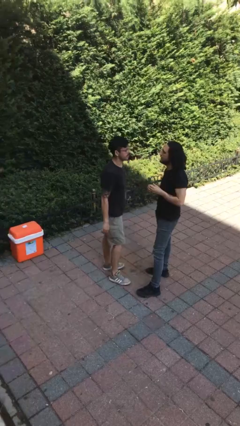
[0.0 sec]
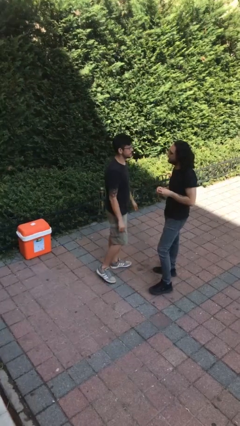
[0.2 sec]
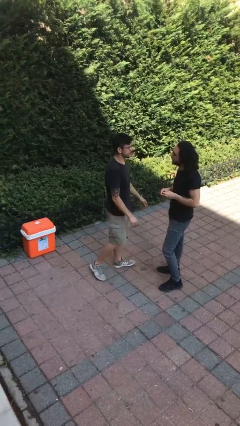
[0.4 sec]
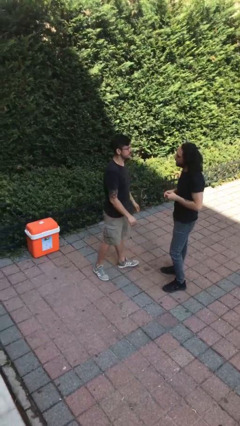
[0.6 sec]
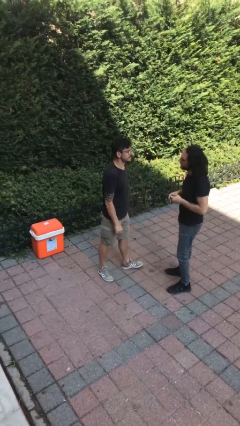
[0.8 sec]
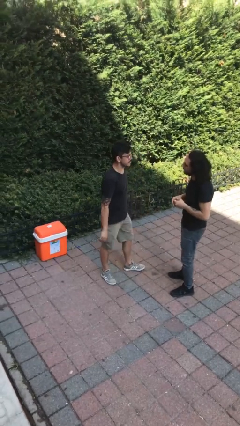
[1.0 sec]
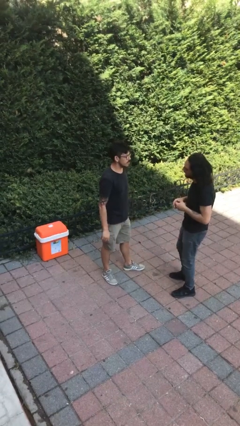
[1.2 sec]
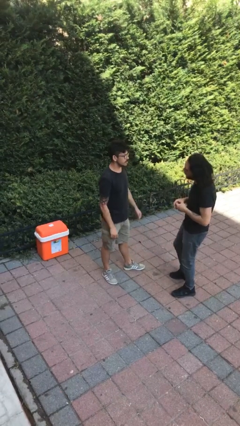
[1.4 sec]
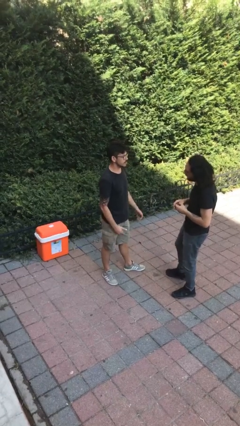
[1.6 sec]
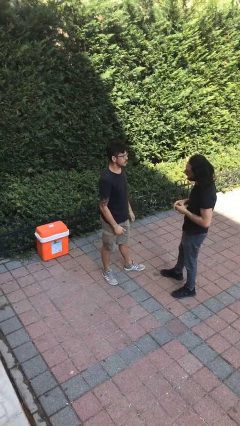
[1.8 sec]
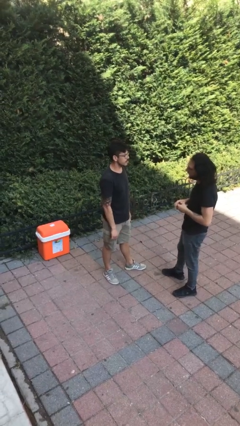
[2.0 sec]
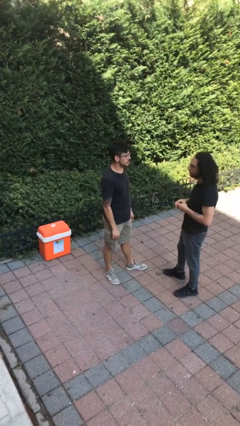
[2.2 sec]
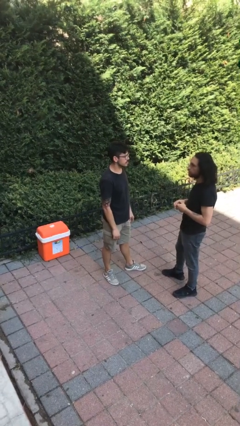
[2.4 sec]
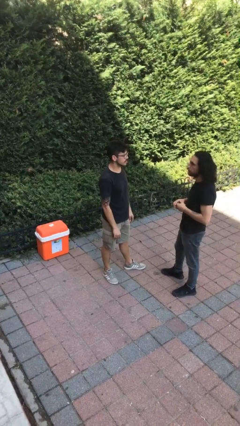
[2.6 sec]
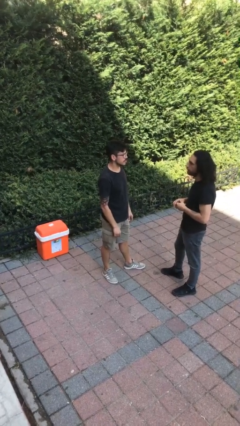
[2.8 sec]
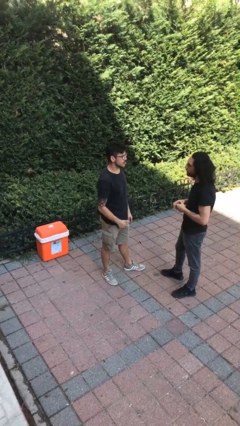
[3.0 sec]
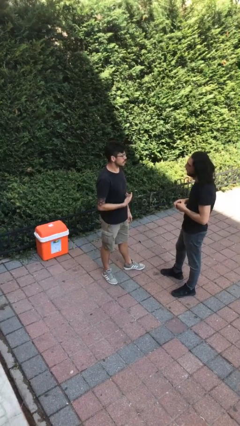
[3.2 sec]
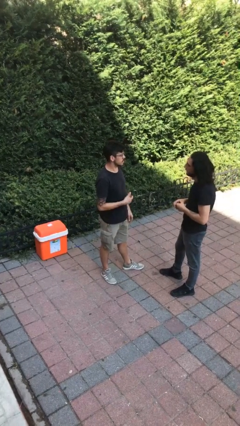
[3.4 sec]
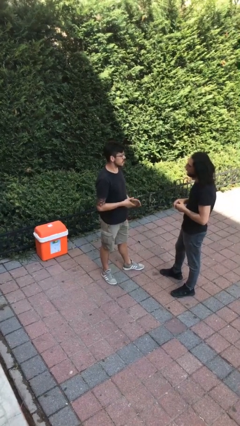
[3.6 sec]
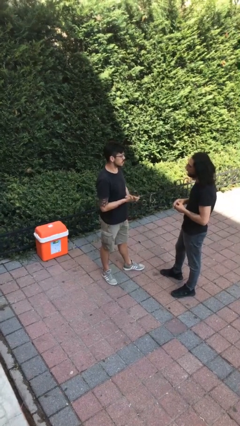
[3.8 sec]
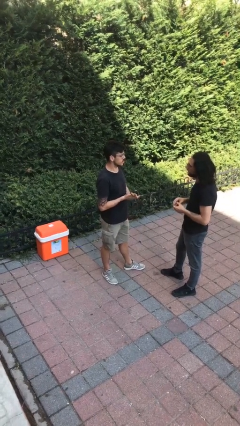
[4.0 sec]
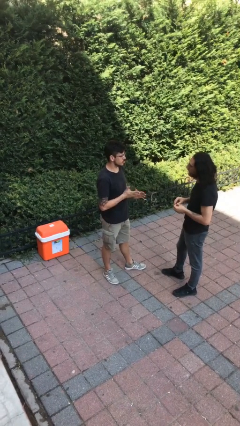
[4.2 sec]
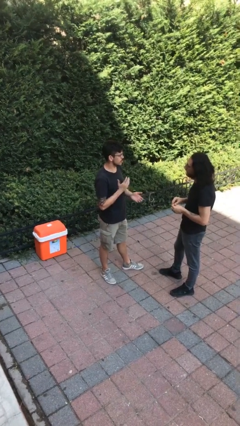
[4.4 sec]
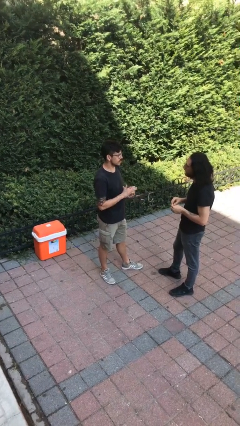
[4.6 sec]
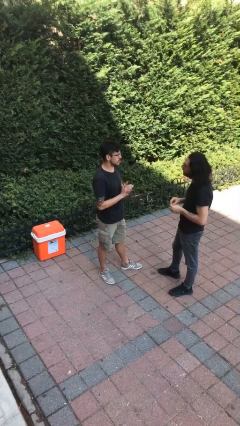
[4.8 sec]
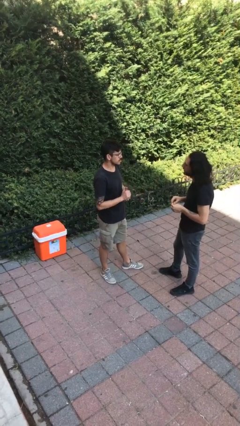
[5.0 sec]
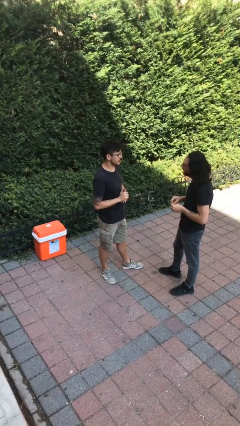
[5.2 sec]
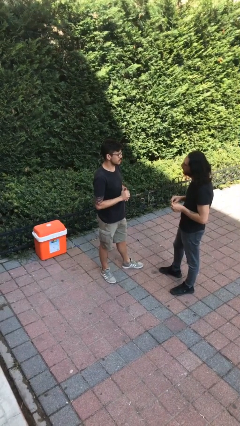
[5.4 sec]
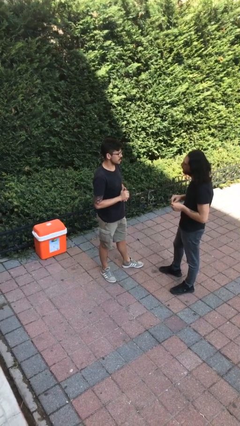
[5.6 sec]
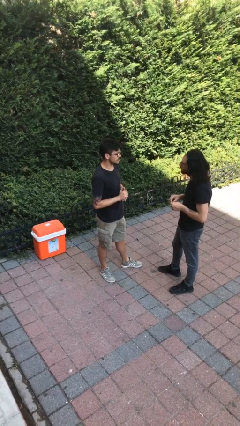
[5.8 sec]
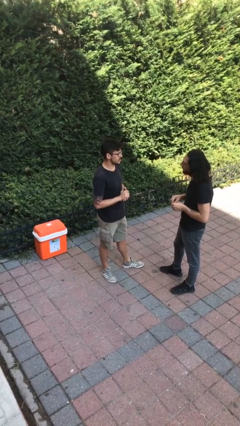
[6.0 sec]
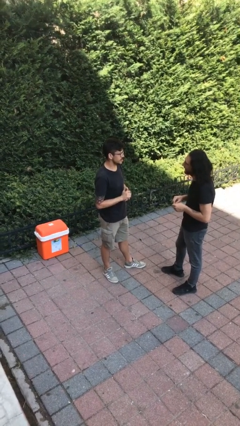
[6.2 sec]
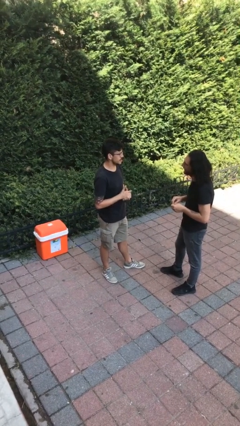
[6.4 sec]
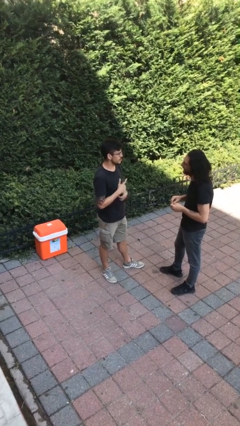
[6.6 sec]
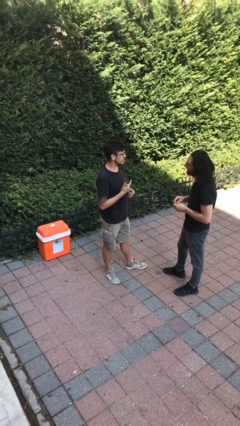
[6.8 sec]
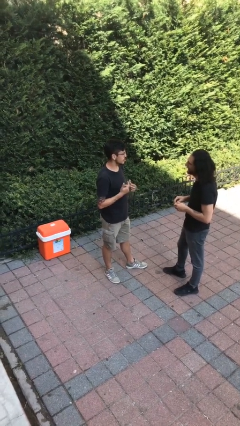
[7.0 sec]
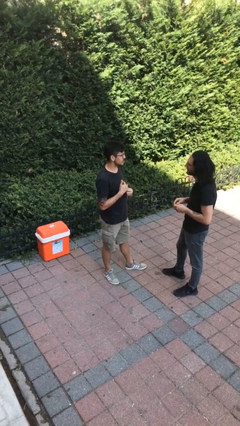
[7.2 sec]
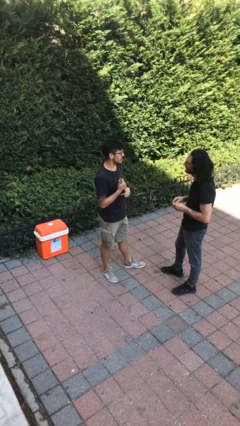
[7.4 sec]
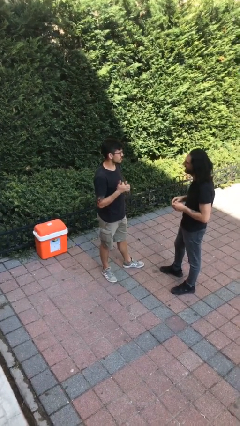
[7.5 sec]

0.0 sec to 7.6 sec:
person talks to person

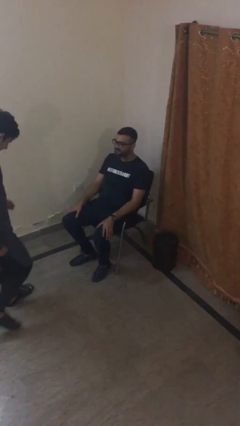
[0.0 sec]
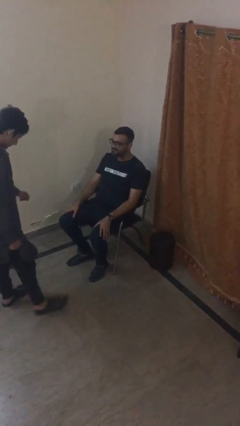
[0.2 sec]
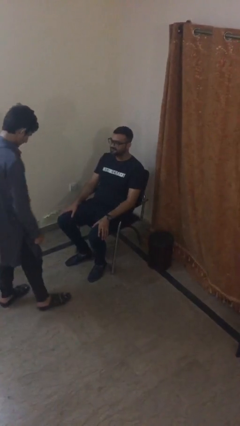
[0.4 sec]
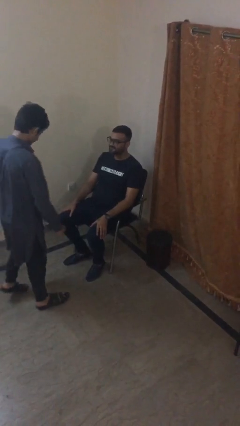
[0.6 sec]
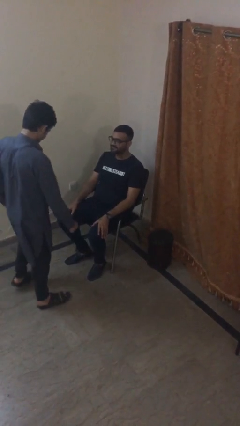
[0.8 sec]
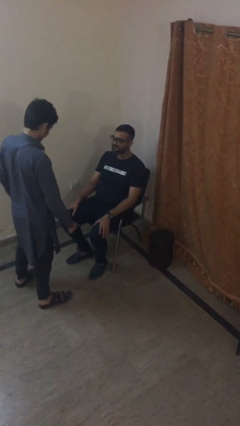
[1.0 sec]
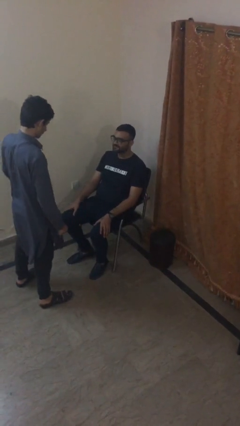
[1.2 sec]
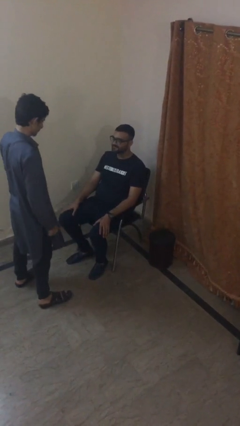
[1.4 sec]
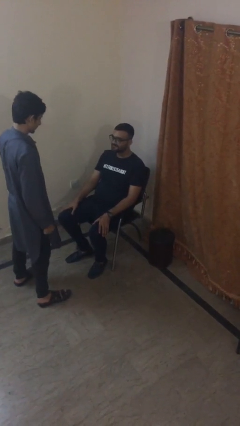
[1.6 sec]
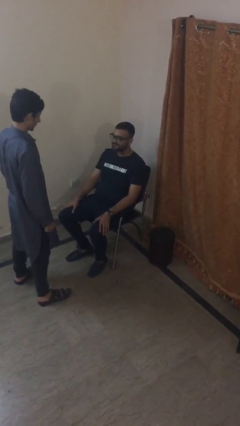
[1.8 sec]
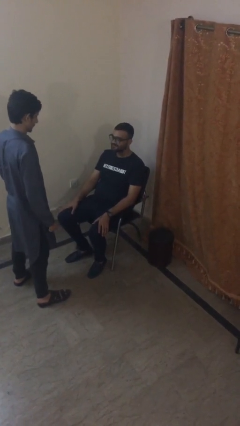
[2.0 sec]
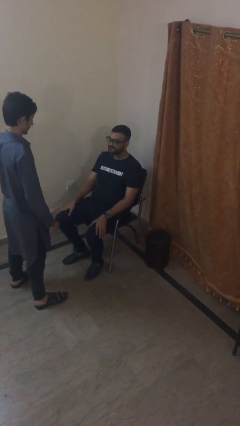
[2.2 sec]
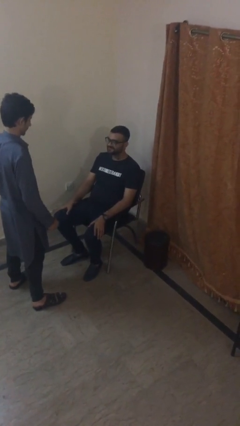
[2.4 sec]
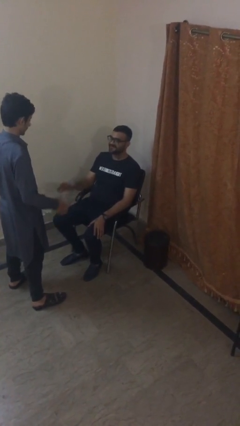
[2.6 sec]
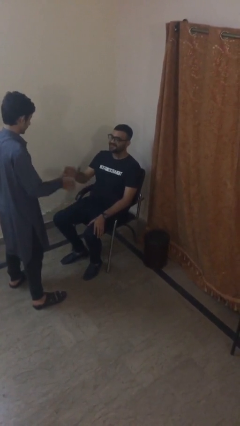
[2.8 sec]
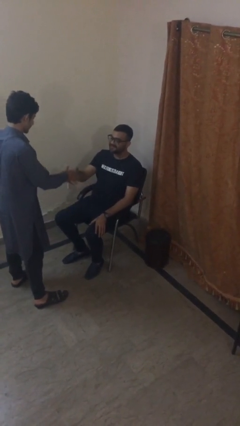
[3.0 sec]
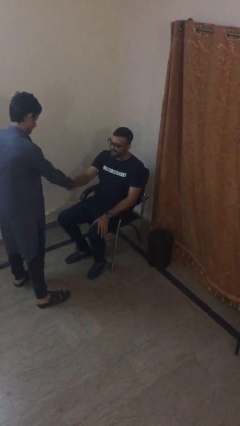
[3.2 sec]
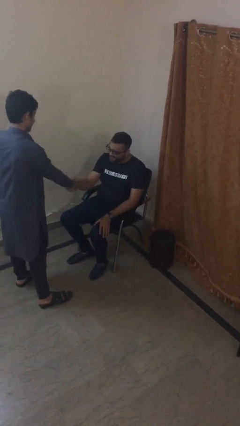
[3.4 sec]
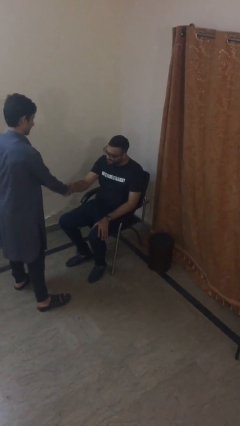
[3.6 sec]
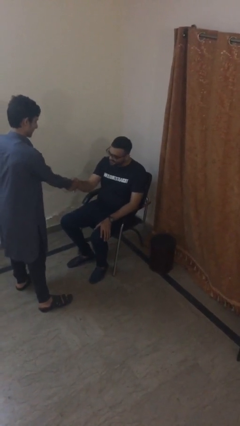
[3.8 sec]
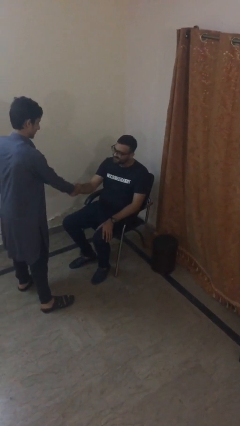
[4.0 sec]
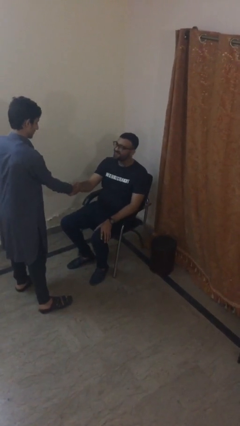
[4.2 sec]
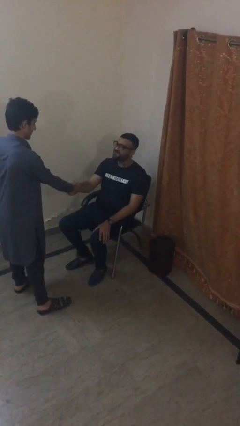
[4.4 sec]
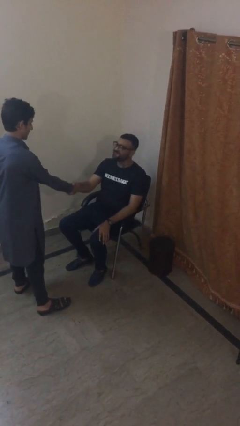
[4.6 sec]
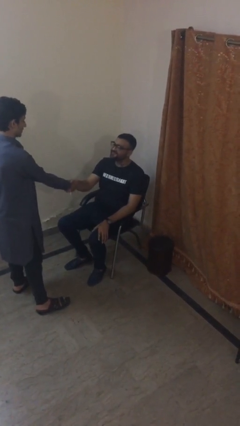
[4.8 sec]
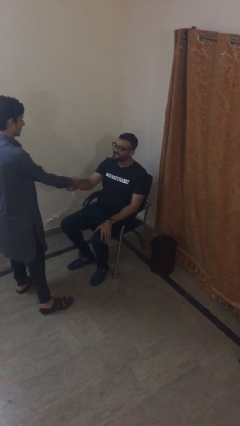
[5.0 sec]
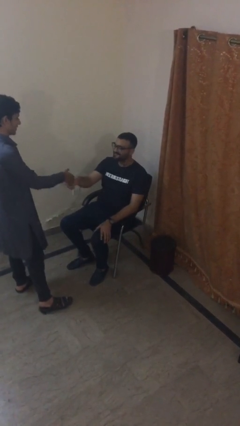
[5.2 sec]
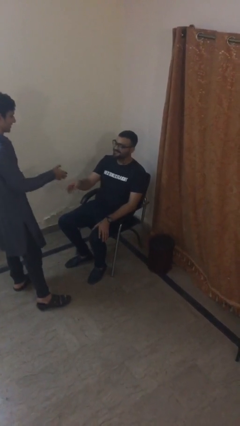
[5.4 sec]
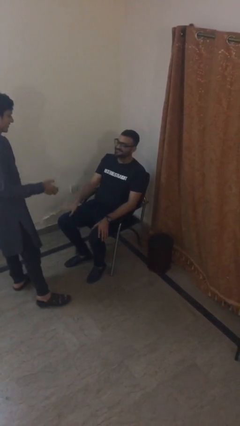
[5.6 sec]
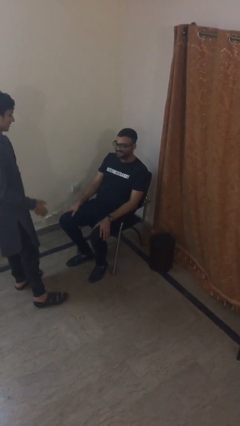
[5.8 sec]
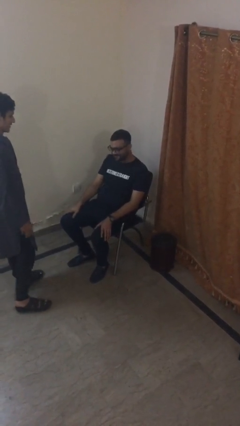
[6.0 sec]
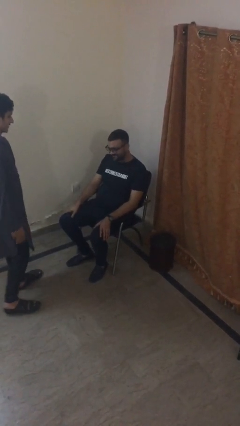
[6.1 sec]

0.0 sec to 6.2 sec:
person shakes hand

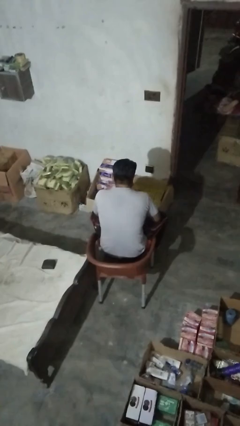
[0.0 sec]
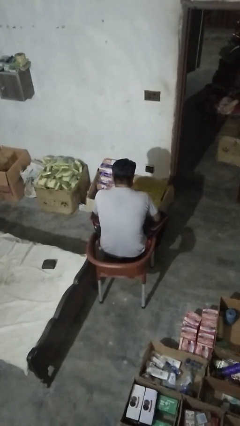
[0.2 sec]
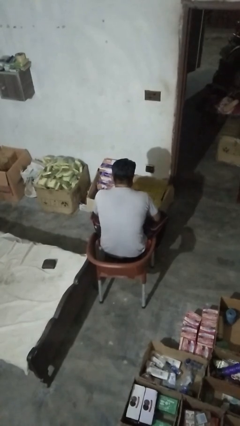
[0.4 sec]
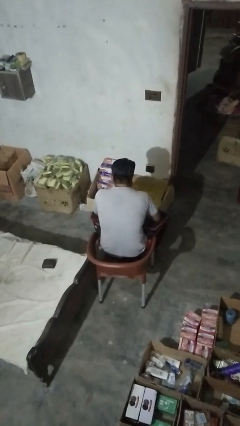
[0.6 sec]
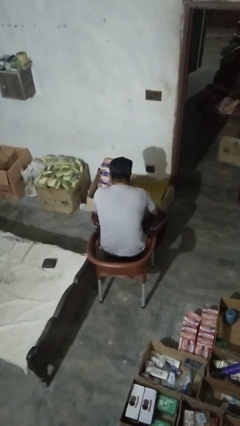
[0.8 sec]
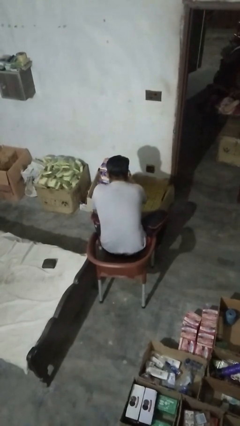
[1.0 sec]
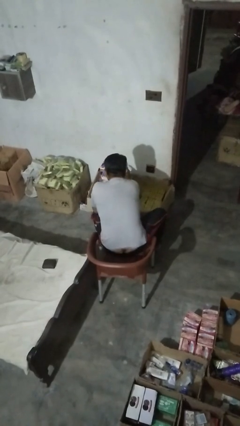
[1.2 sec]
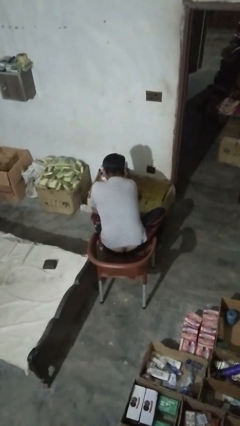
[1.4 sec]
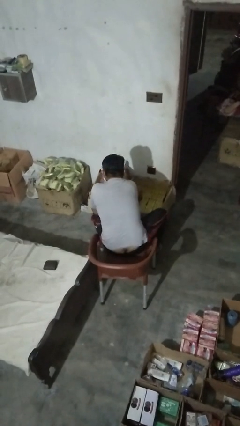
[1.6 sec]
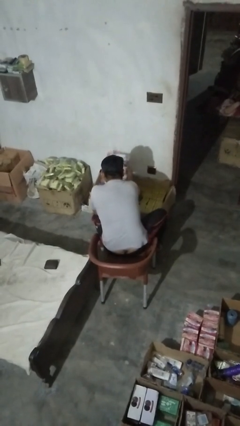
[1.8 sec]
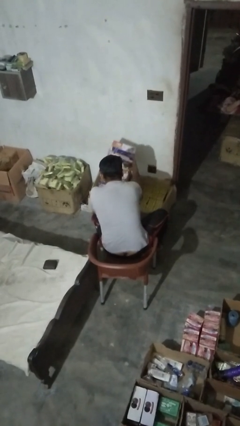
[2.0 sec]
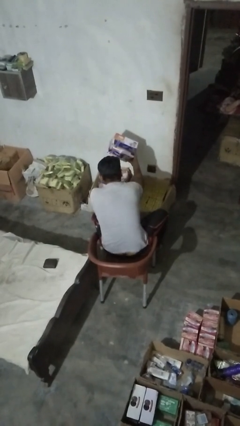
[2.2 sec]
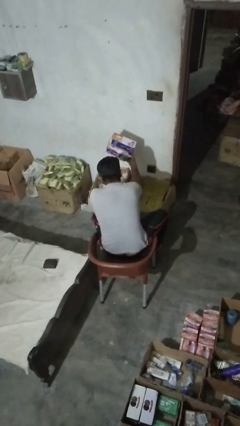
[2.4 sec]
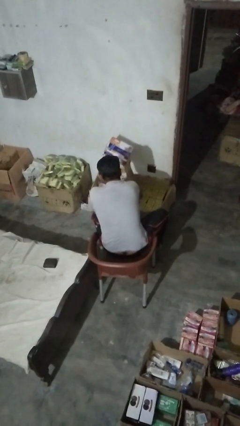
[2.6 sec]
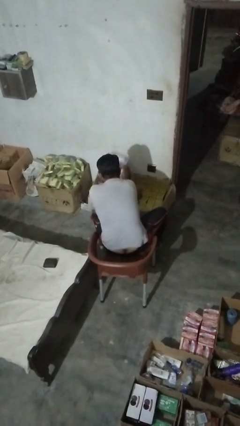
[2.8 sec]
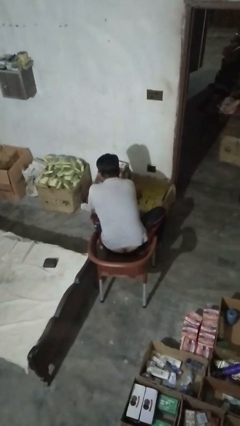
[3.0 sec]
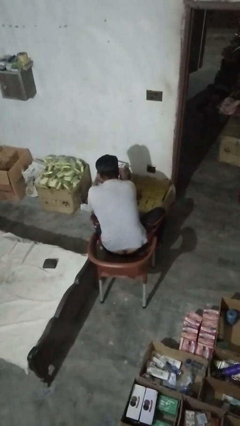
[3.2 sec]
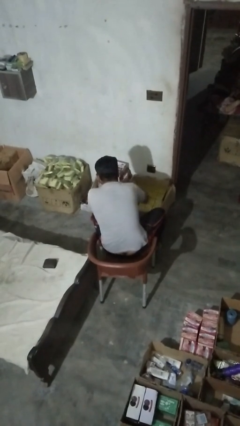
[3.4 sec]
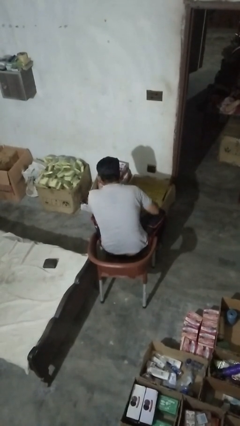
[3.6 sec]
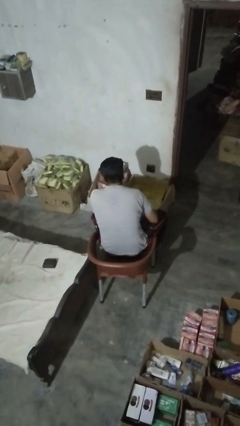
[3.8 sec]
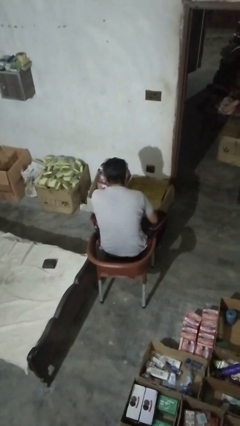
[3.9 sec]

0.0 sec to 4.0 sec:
person searches in box
